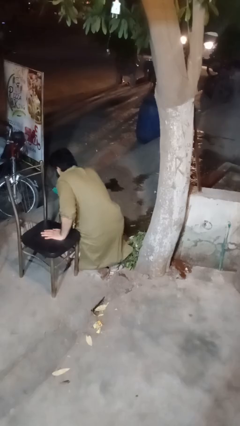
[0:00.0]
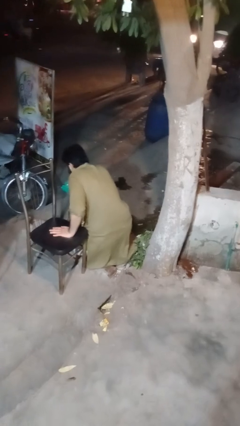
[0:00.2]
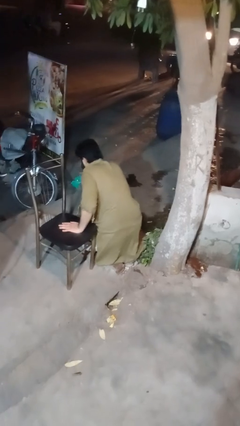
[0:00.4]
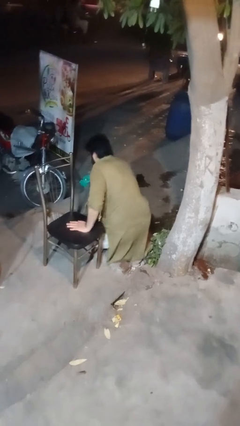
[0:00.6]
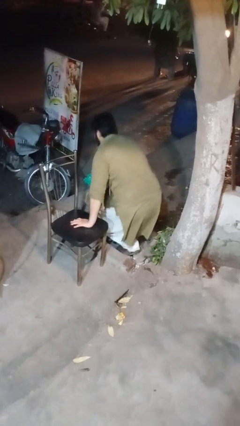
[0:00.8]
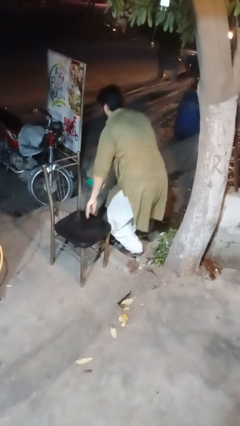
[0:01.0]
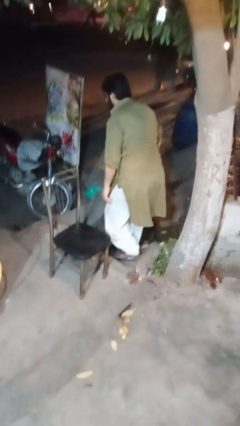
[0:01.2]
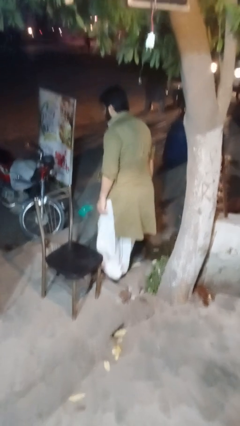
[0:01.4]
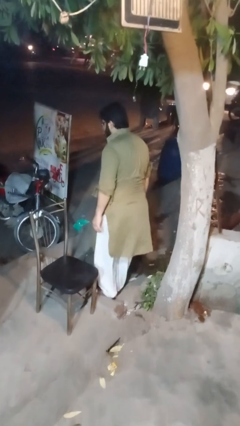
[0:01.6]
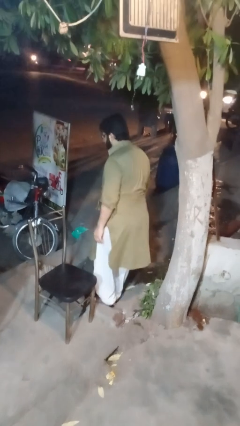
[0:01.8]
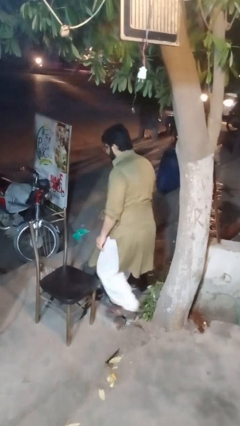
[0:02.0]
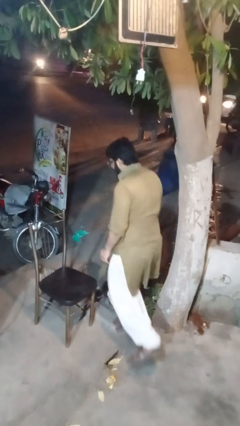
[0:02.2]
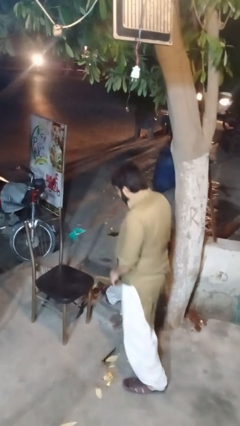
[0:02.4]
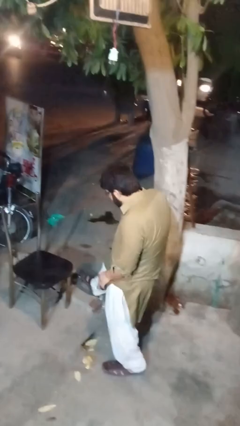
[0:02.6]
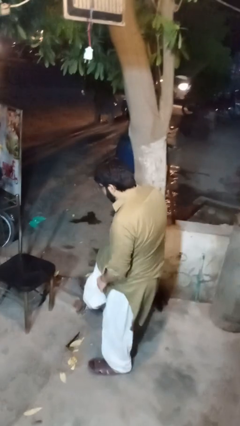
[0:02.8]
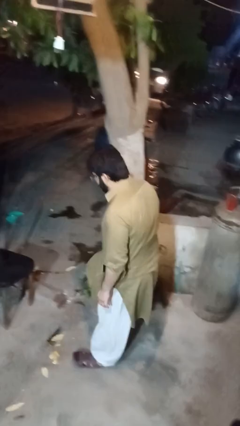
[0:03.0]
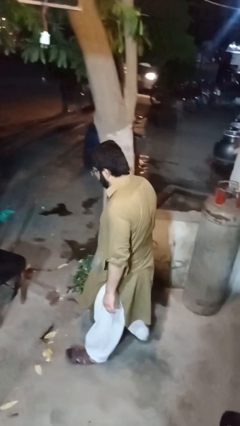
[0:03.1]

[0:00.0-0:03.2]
person stands up from floor

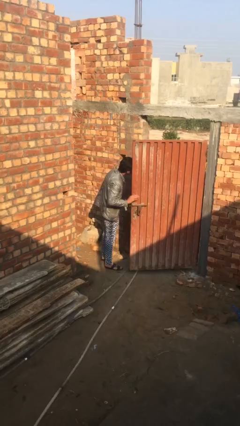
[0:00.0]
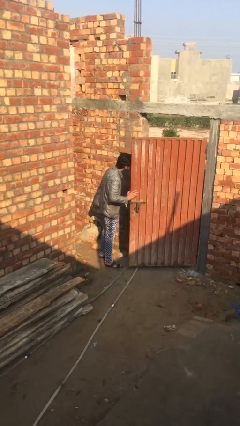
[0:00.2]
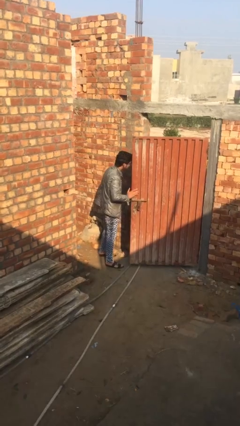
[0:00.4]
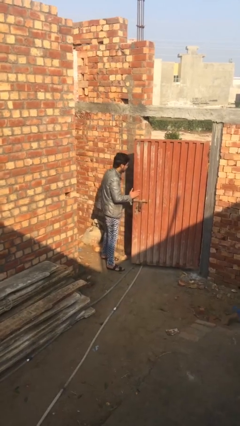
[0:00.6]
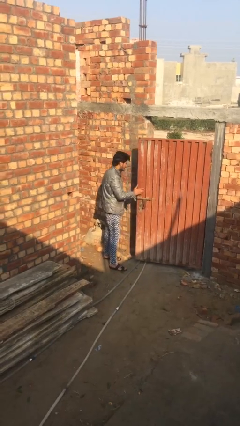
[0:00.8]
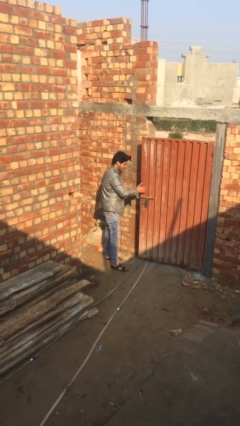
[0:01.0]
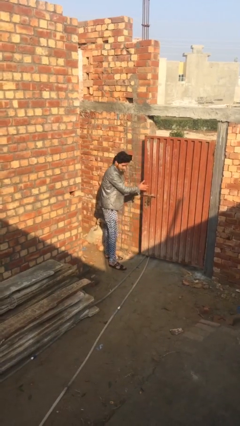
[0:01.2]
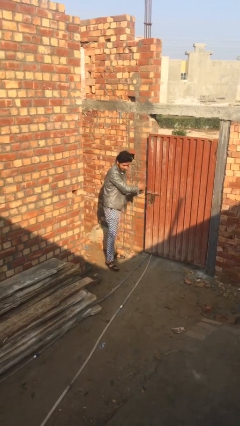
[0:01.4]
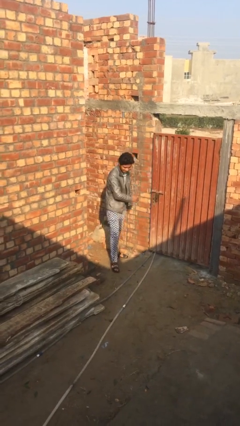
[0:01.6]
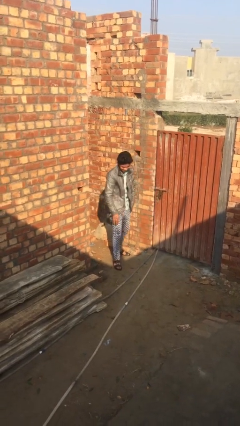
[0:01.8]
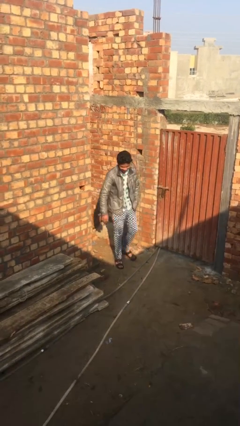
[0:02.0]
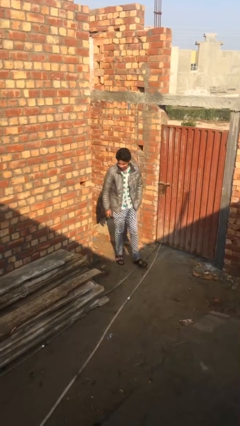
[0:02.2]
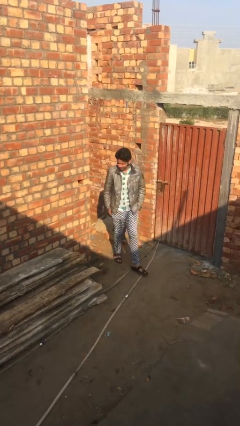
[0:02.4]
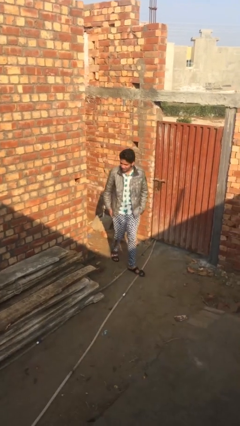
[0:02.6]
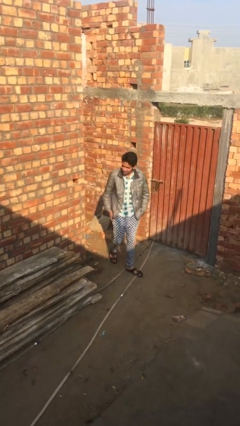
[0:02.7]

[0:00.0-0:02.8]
person closes facility door

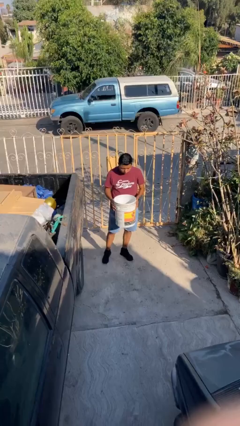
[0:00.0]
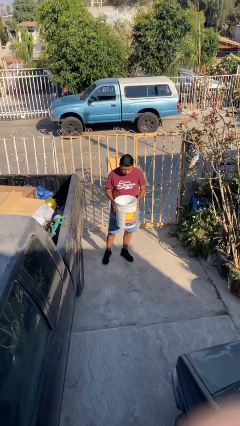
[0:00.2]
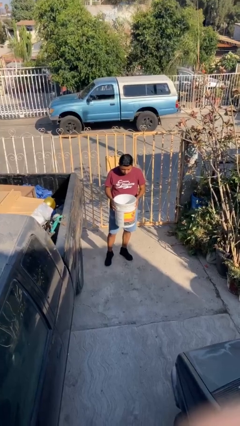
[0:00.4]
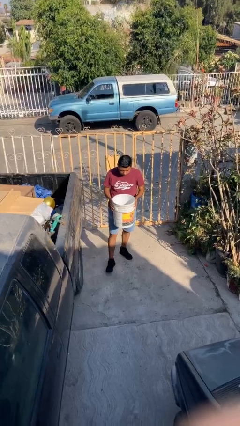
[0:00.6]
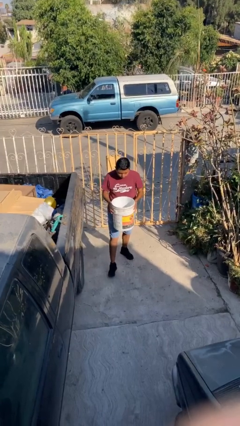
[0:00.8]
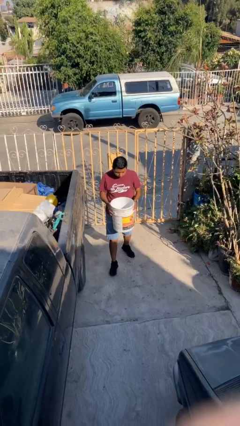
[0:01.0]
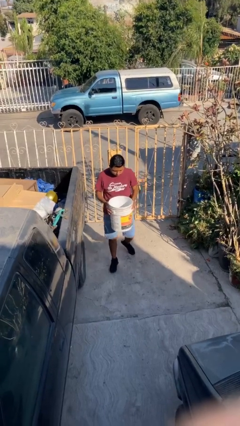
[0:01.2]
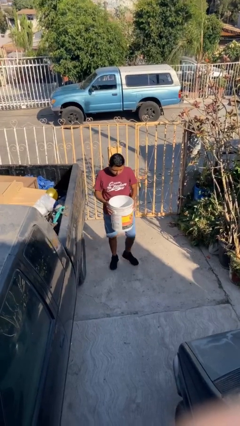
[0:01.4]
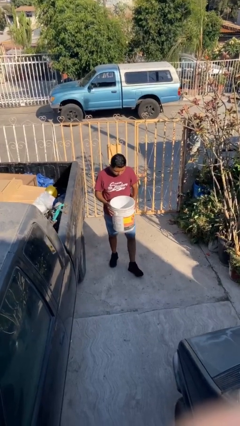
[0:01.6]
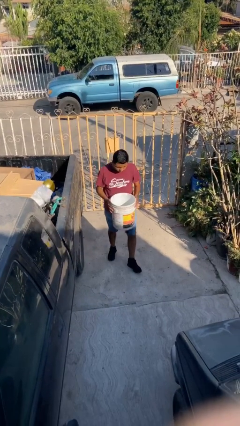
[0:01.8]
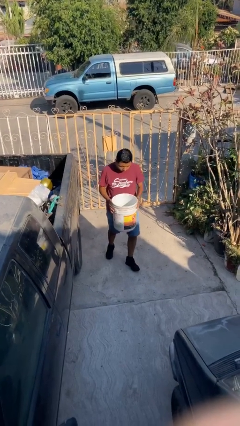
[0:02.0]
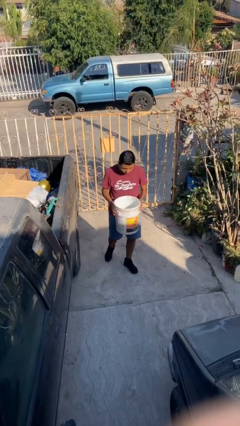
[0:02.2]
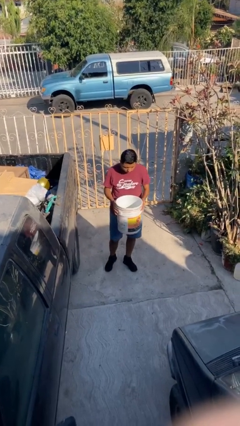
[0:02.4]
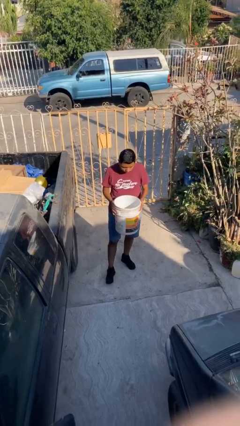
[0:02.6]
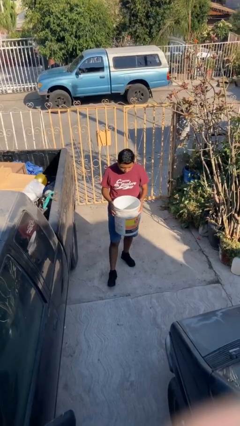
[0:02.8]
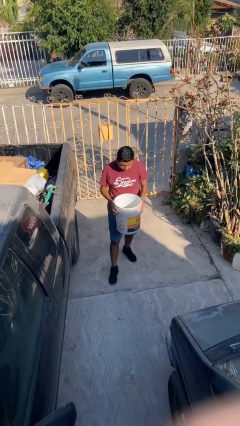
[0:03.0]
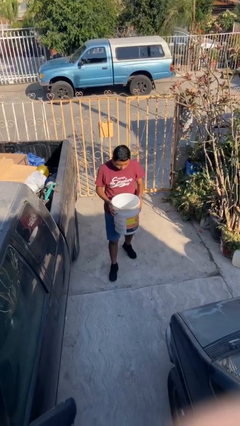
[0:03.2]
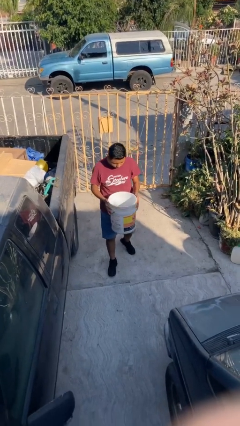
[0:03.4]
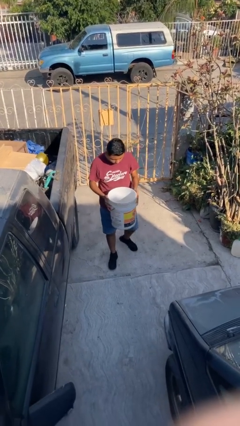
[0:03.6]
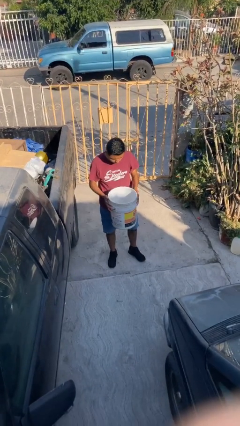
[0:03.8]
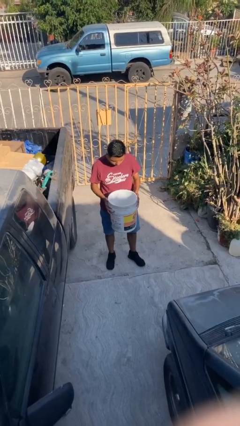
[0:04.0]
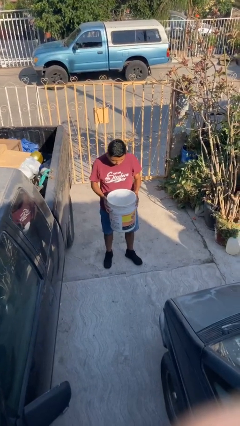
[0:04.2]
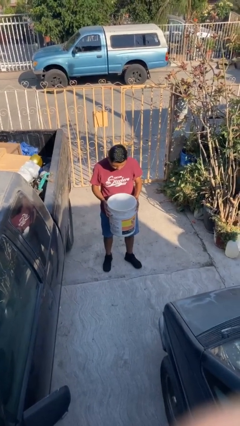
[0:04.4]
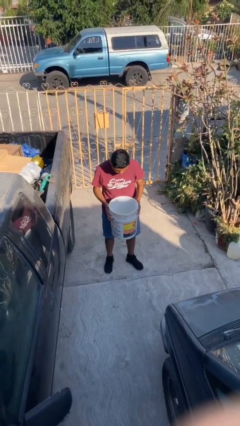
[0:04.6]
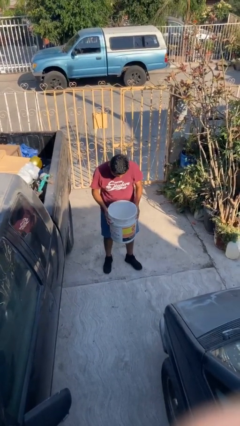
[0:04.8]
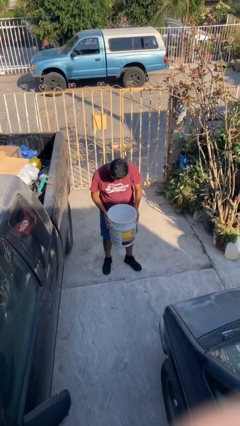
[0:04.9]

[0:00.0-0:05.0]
person carries heavy object

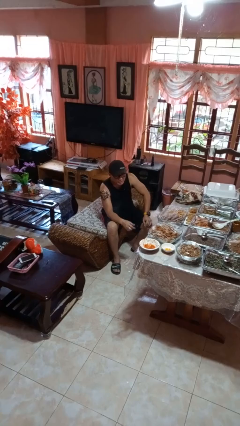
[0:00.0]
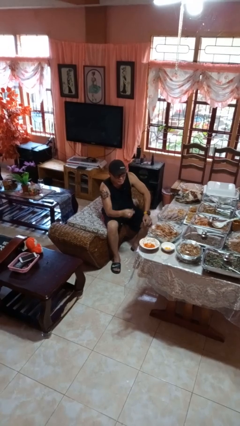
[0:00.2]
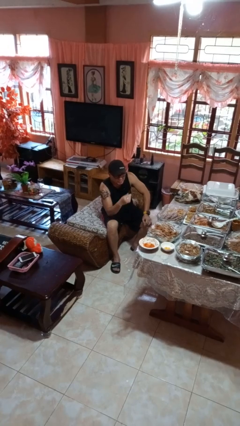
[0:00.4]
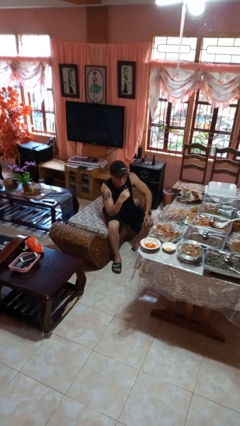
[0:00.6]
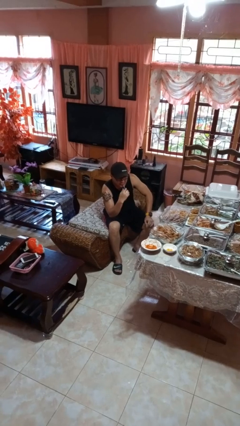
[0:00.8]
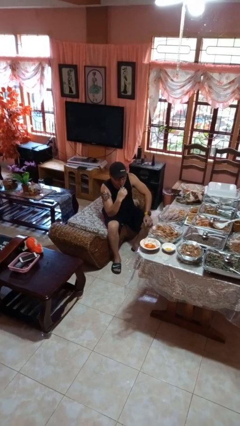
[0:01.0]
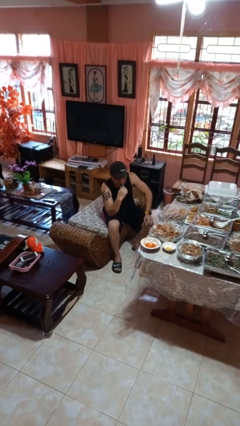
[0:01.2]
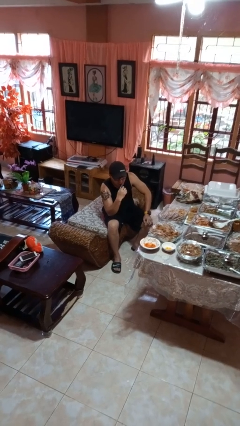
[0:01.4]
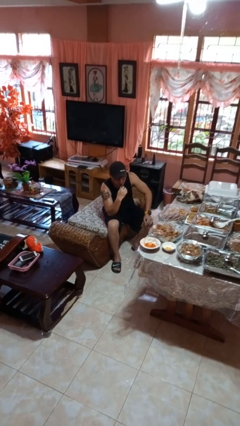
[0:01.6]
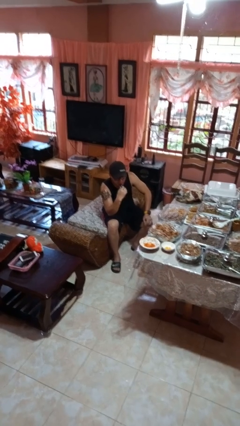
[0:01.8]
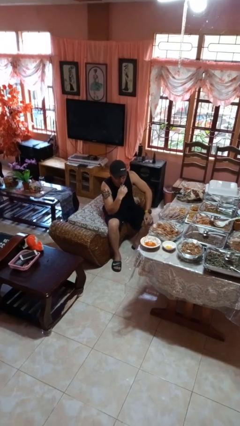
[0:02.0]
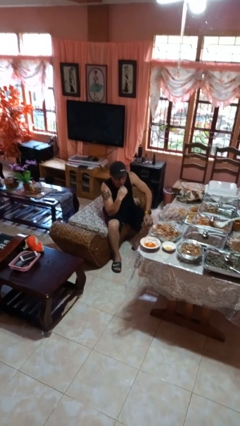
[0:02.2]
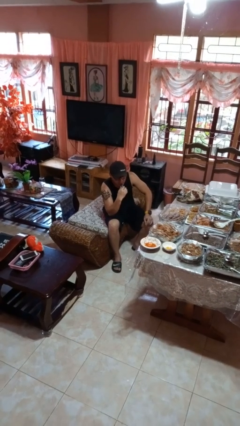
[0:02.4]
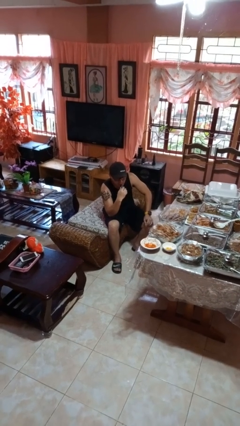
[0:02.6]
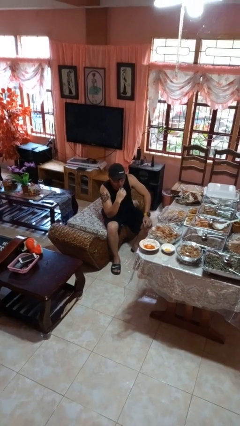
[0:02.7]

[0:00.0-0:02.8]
person vapes

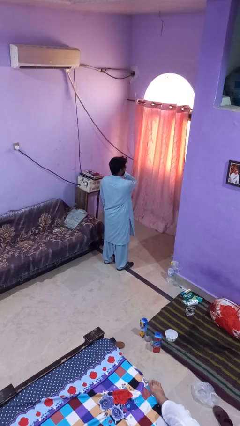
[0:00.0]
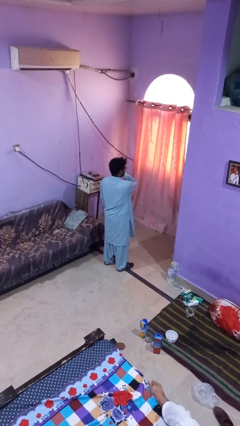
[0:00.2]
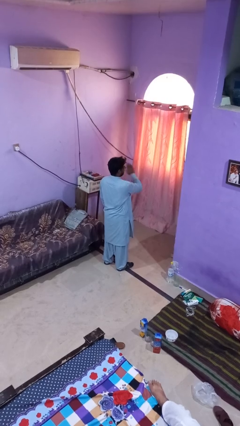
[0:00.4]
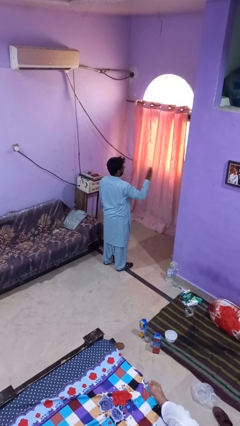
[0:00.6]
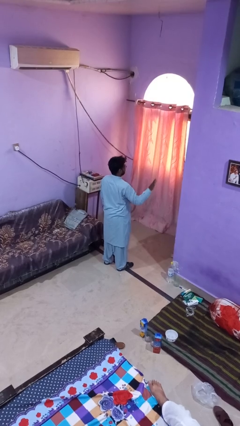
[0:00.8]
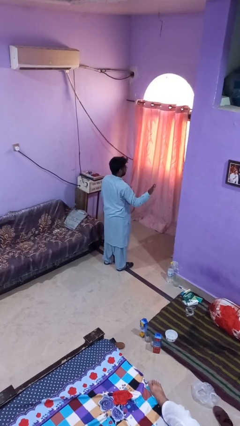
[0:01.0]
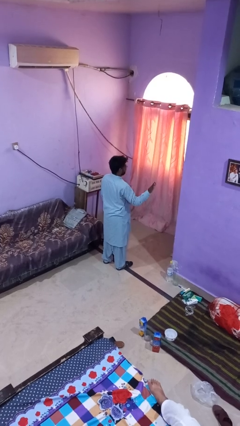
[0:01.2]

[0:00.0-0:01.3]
person gestures swipe right

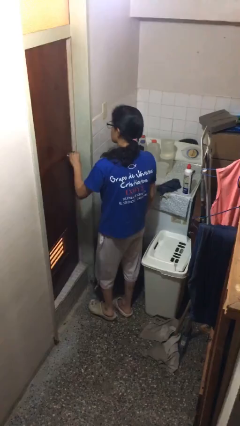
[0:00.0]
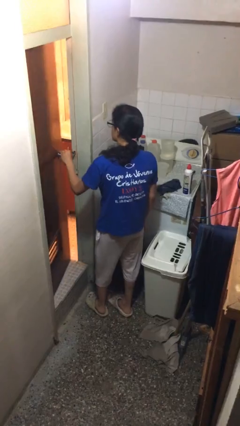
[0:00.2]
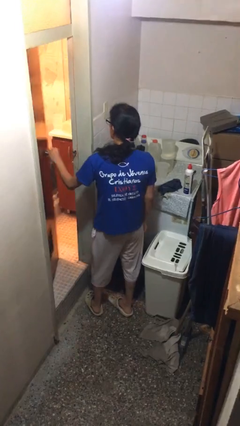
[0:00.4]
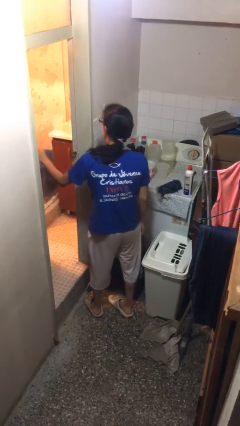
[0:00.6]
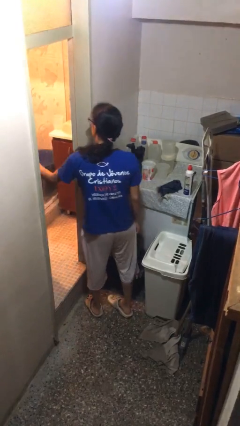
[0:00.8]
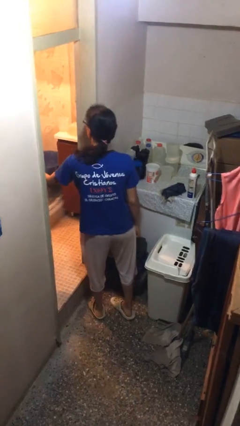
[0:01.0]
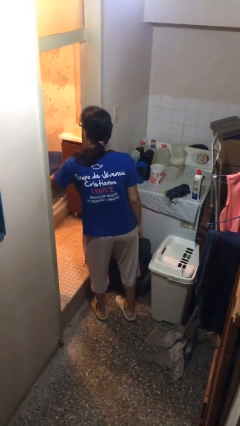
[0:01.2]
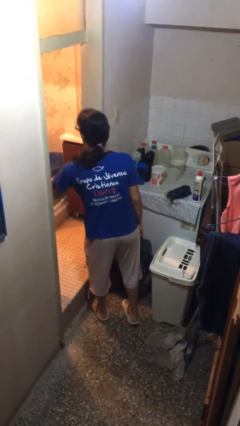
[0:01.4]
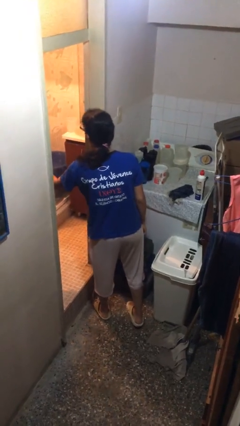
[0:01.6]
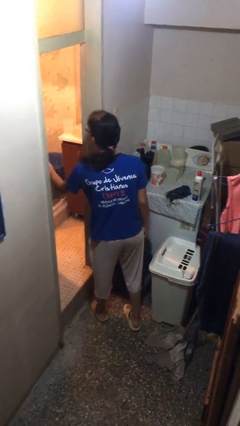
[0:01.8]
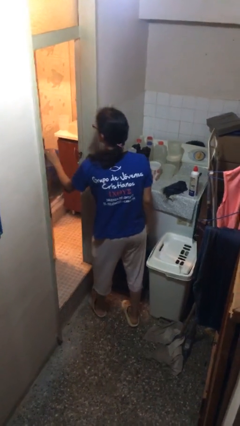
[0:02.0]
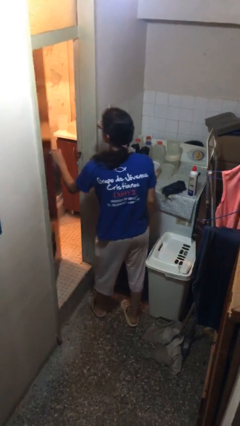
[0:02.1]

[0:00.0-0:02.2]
person opens facility door

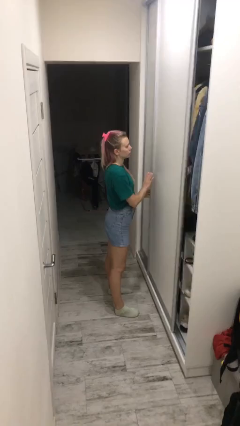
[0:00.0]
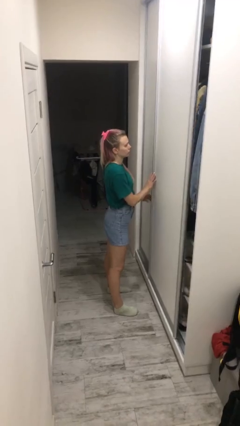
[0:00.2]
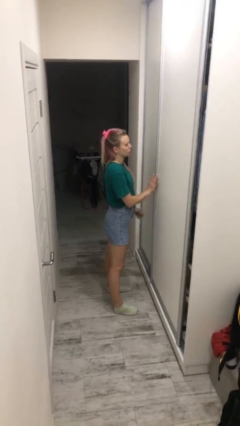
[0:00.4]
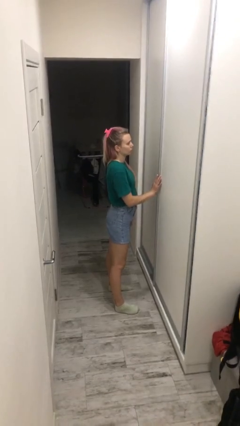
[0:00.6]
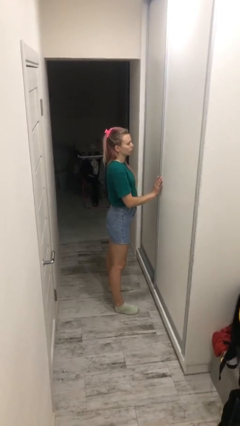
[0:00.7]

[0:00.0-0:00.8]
person closes sliding door
